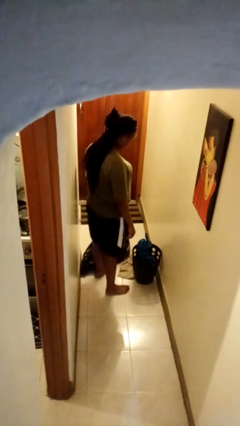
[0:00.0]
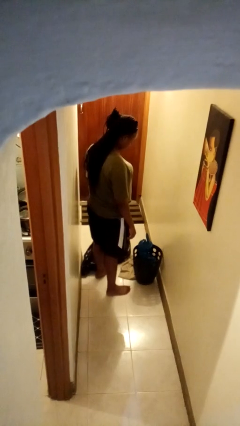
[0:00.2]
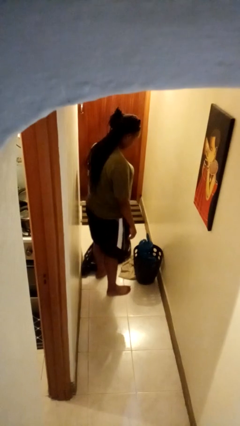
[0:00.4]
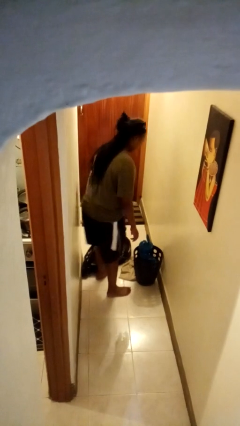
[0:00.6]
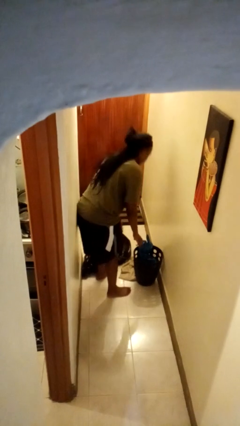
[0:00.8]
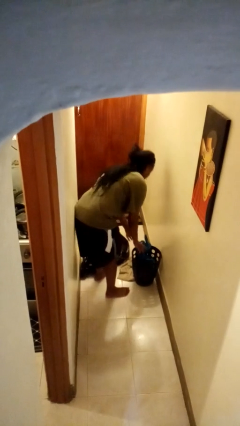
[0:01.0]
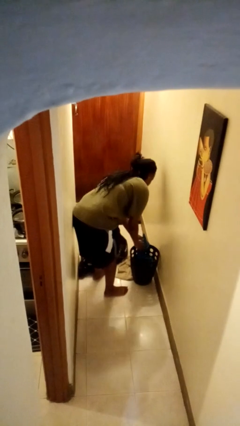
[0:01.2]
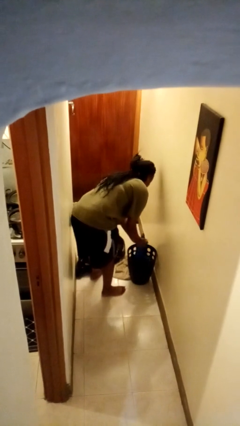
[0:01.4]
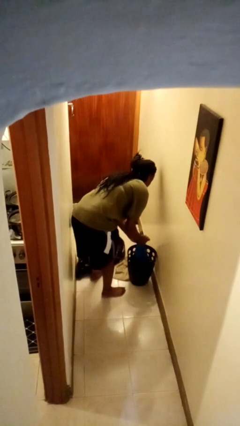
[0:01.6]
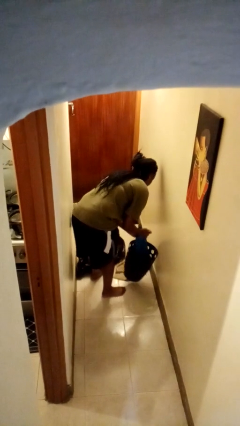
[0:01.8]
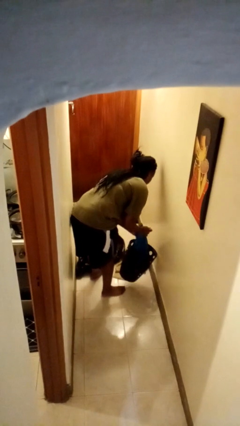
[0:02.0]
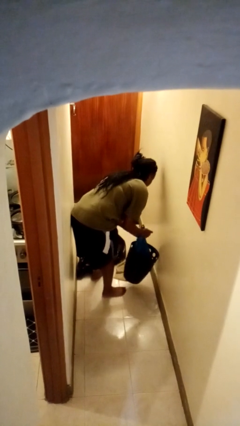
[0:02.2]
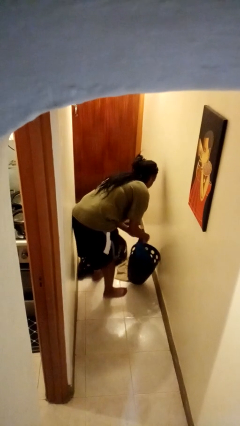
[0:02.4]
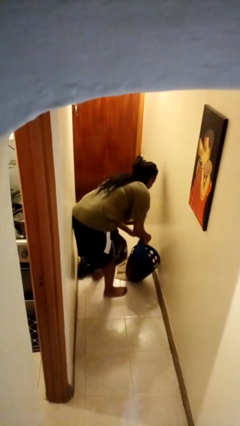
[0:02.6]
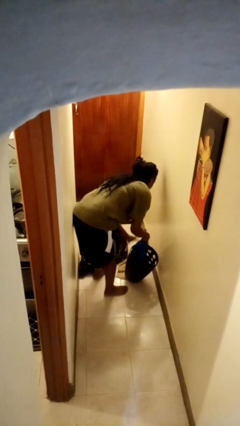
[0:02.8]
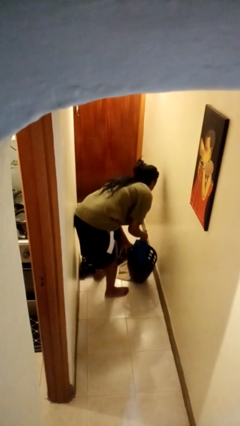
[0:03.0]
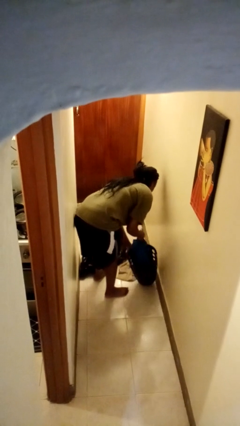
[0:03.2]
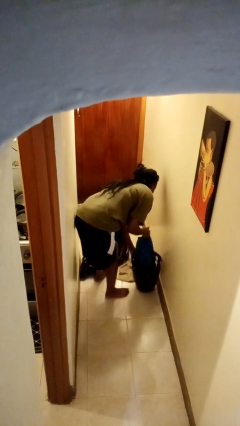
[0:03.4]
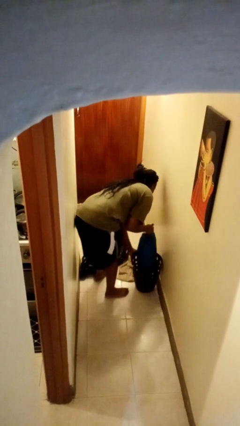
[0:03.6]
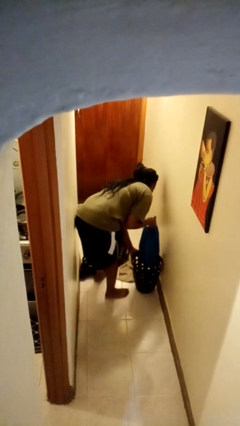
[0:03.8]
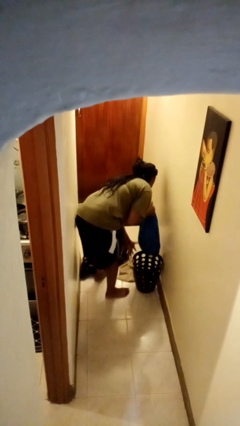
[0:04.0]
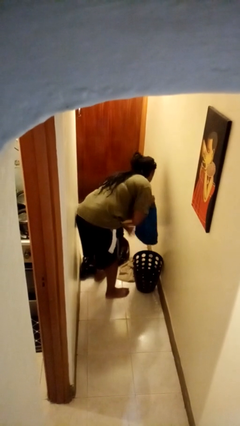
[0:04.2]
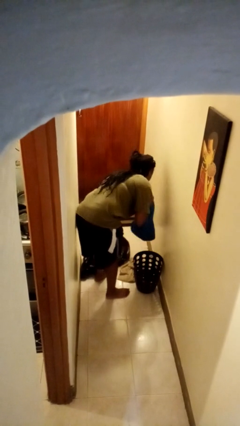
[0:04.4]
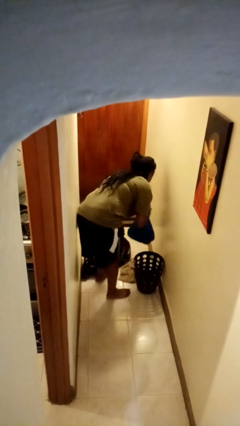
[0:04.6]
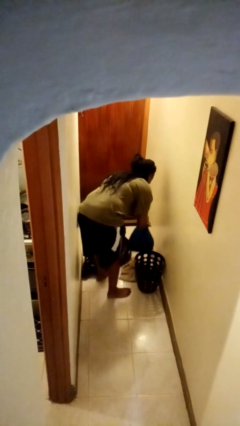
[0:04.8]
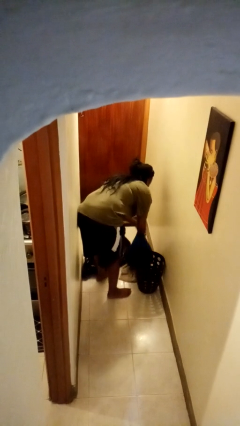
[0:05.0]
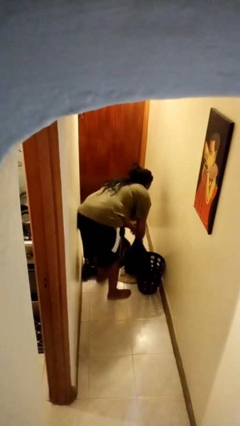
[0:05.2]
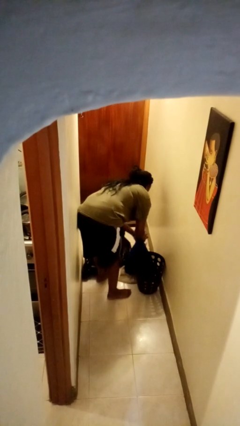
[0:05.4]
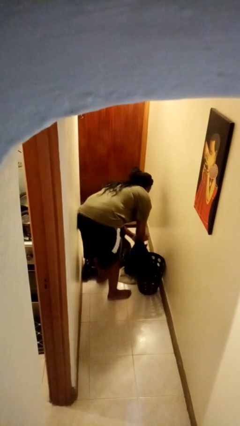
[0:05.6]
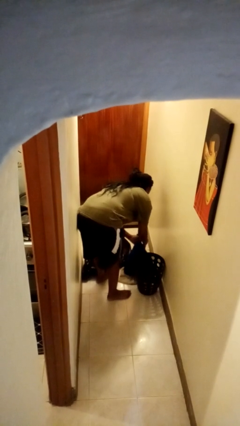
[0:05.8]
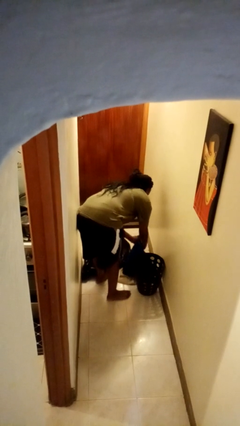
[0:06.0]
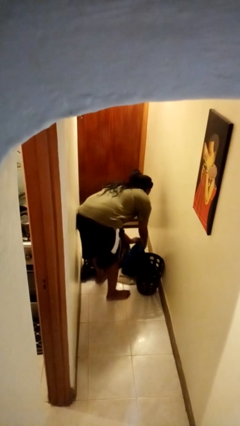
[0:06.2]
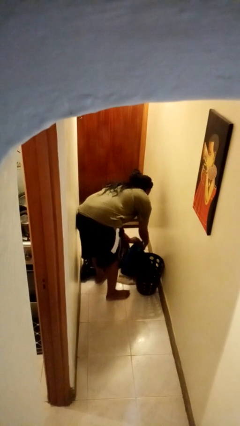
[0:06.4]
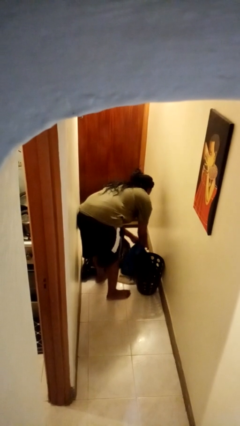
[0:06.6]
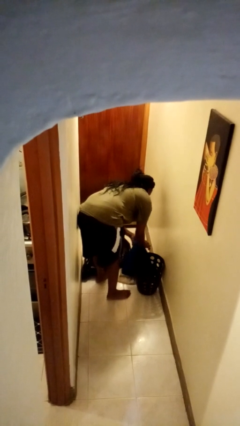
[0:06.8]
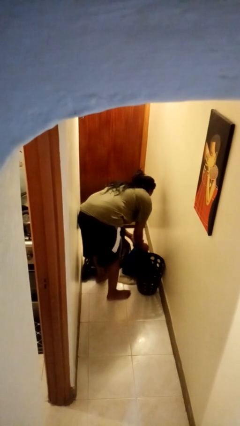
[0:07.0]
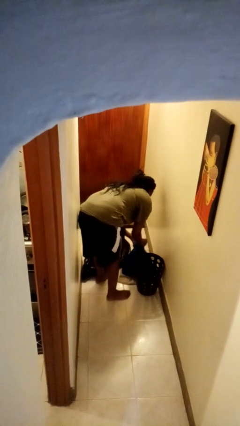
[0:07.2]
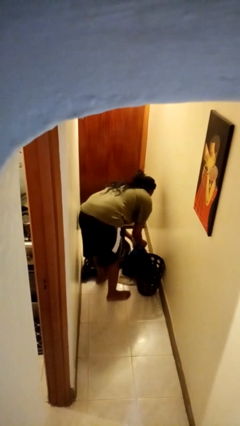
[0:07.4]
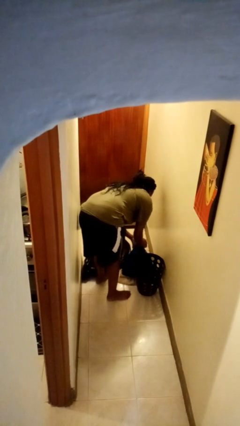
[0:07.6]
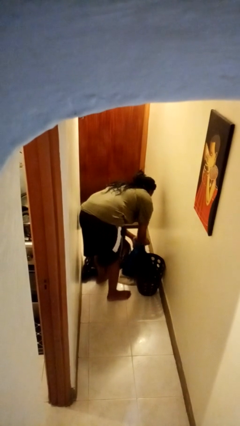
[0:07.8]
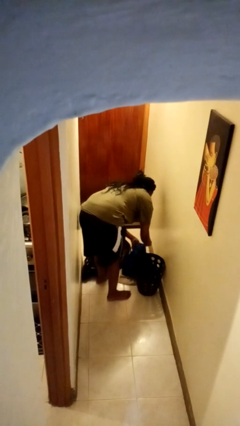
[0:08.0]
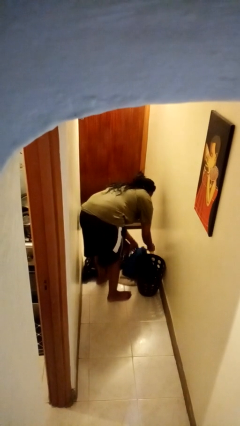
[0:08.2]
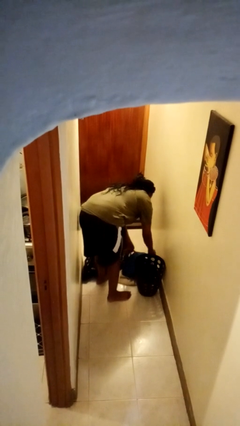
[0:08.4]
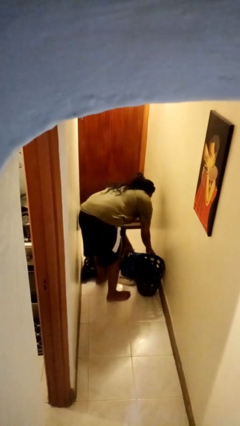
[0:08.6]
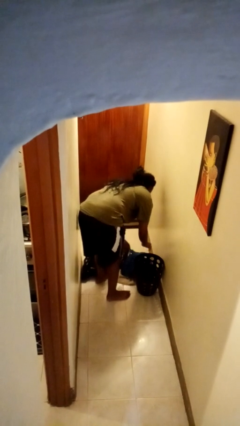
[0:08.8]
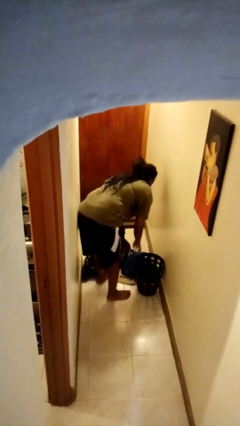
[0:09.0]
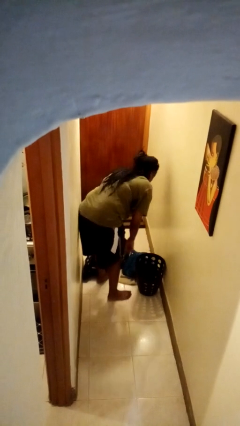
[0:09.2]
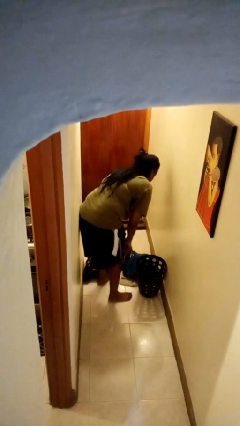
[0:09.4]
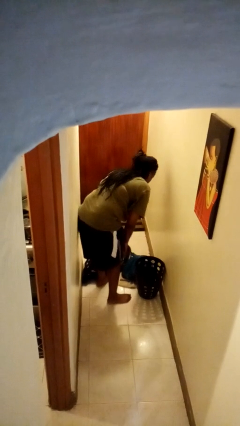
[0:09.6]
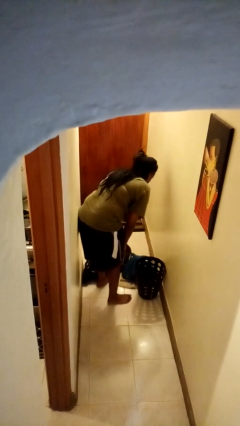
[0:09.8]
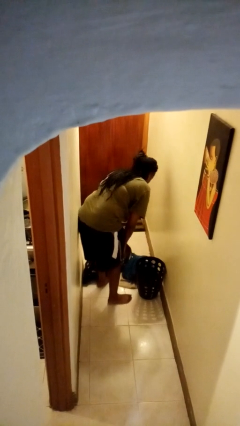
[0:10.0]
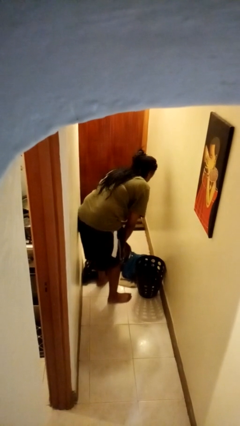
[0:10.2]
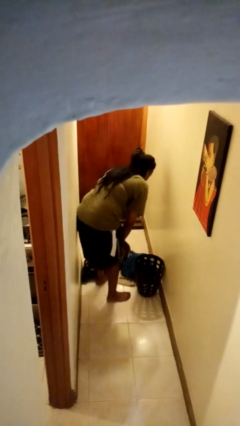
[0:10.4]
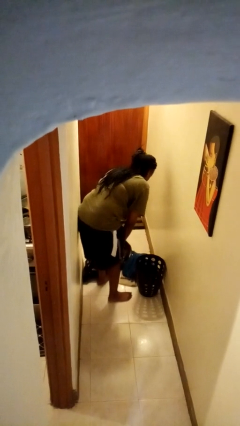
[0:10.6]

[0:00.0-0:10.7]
person removes trashbag from trashcan

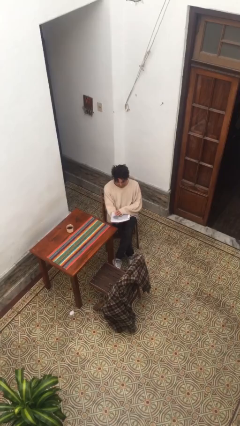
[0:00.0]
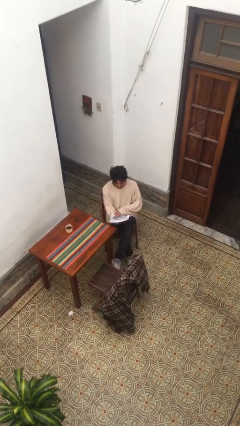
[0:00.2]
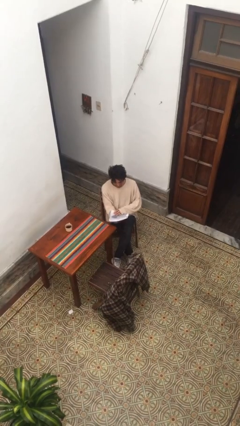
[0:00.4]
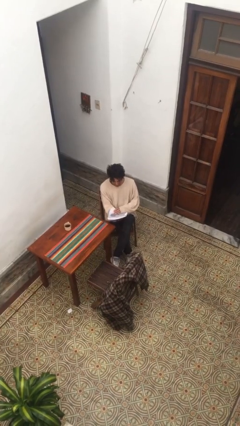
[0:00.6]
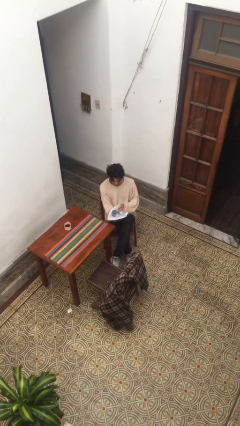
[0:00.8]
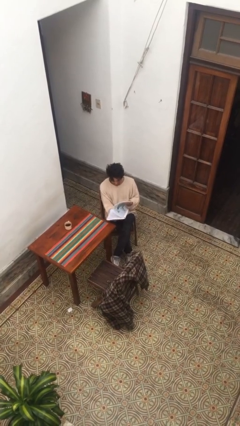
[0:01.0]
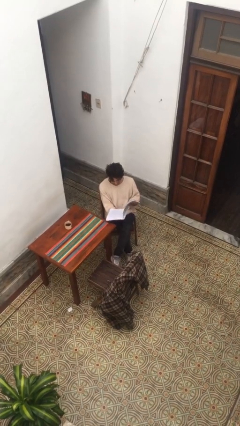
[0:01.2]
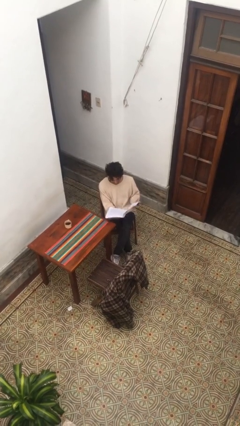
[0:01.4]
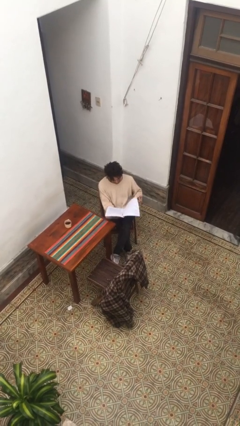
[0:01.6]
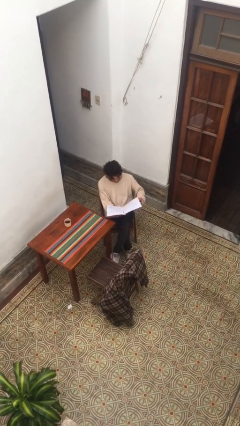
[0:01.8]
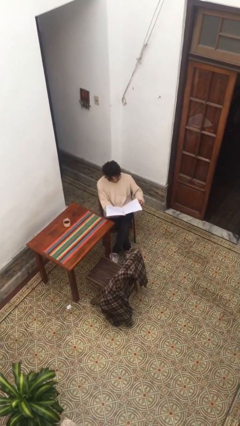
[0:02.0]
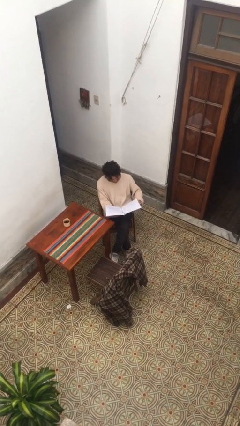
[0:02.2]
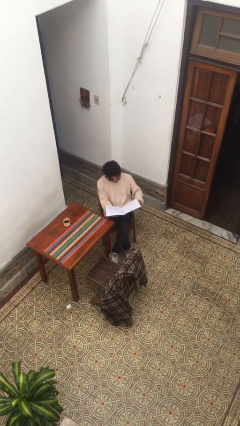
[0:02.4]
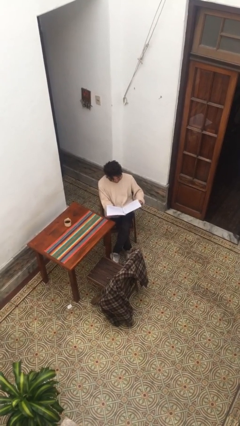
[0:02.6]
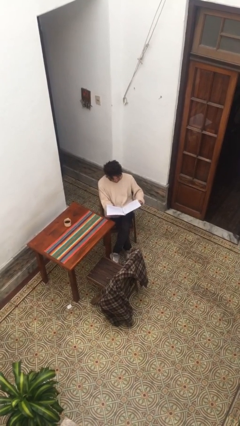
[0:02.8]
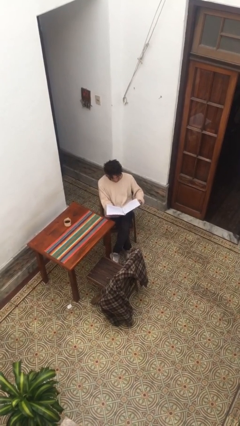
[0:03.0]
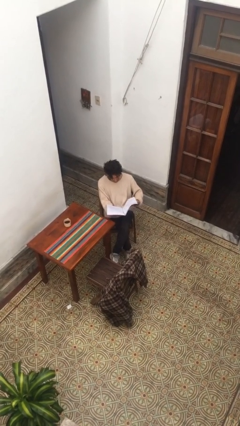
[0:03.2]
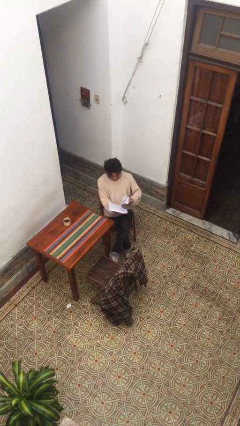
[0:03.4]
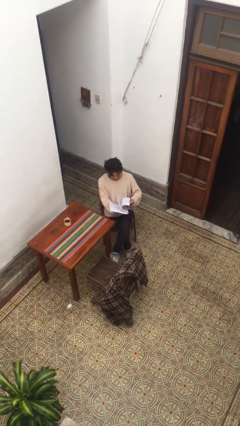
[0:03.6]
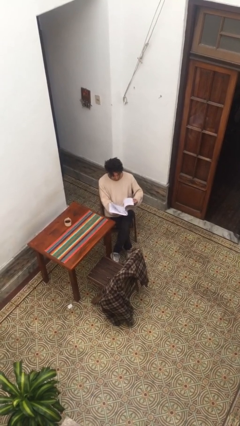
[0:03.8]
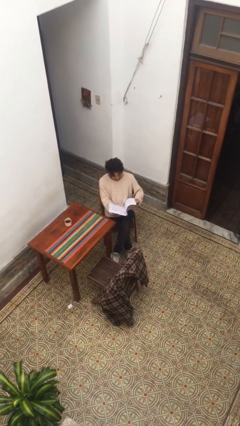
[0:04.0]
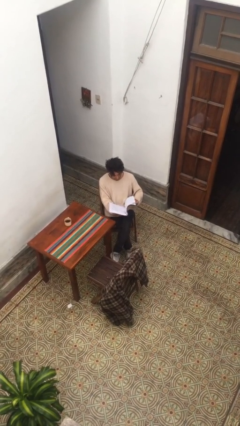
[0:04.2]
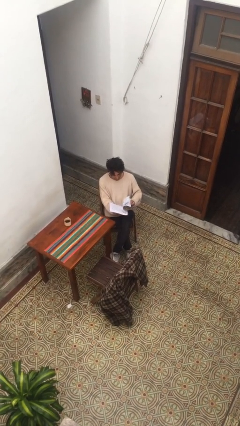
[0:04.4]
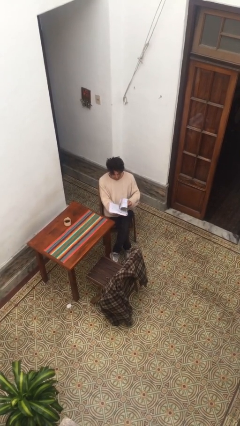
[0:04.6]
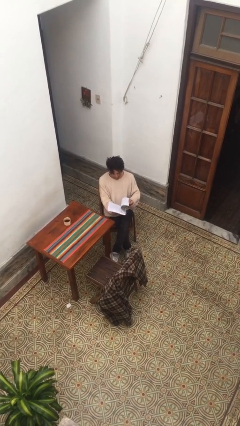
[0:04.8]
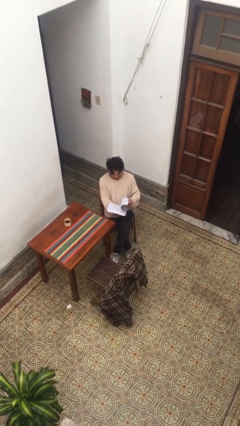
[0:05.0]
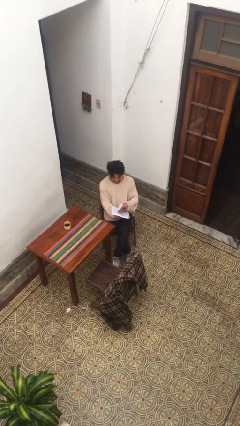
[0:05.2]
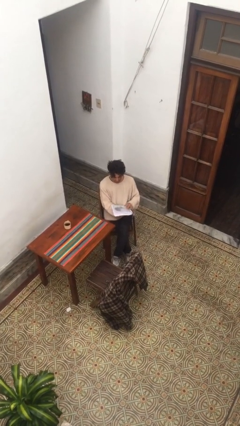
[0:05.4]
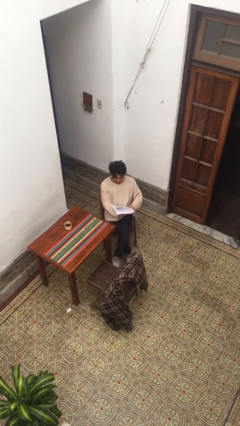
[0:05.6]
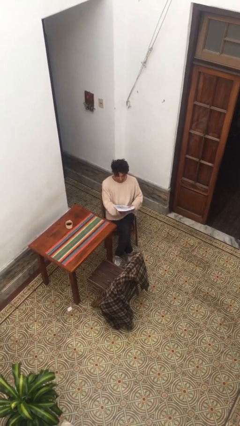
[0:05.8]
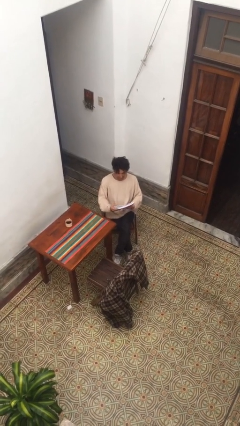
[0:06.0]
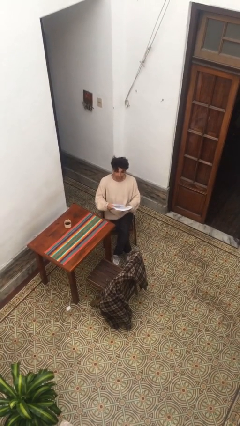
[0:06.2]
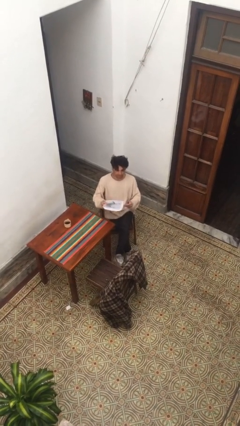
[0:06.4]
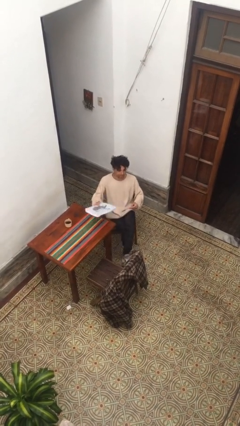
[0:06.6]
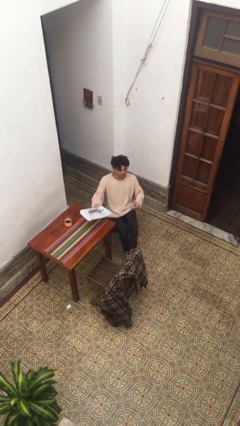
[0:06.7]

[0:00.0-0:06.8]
person reads document

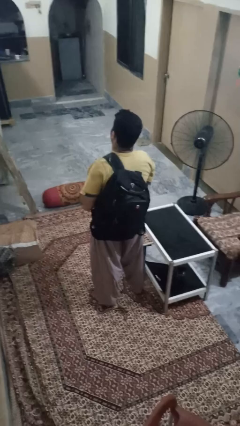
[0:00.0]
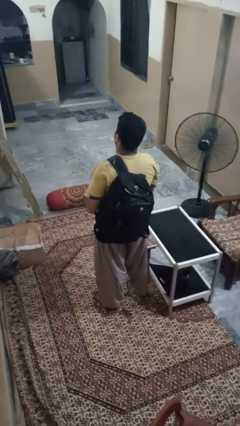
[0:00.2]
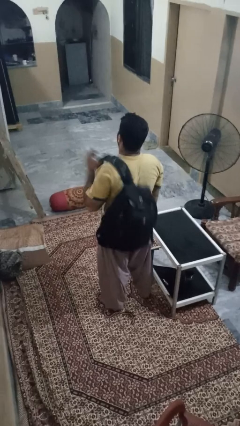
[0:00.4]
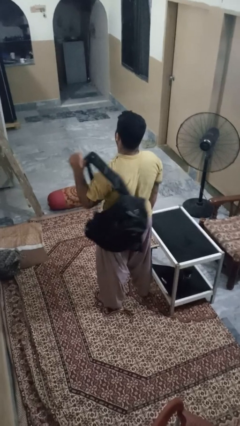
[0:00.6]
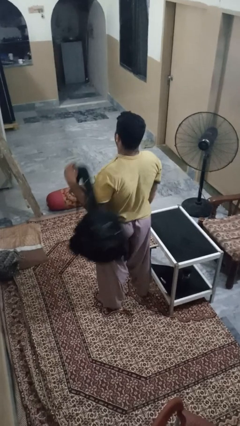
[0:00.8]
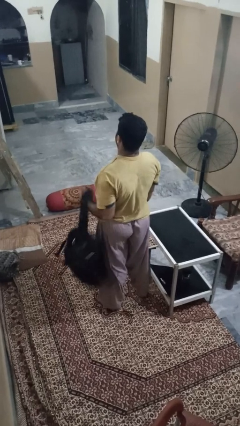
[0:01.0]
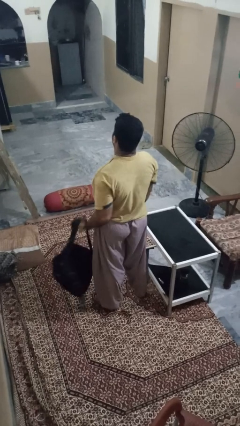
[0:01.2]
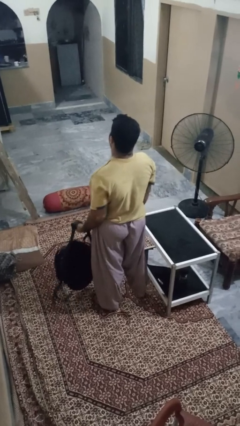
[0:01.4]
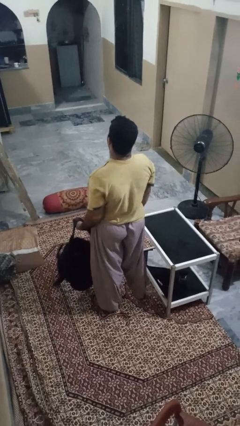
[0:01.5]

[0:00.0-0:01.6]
person takes off backpack
